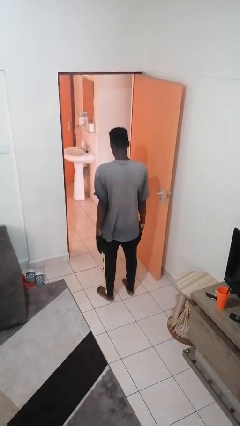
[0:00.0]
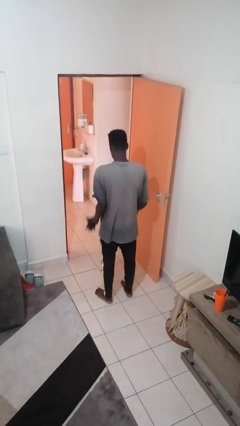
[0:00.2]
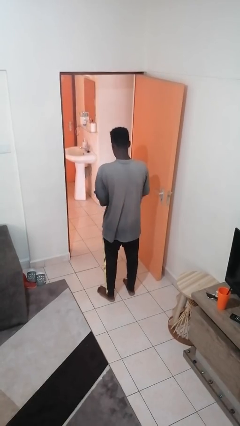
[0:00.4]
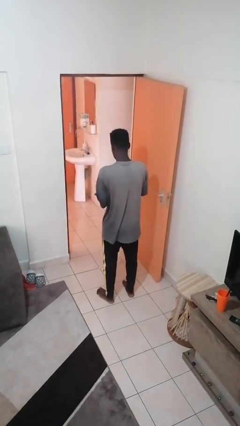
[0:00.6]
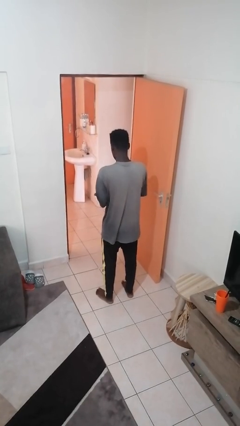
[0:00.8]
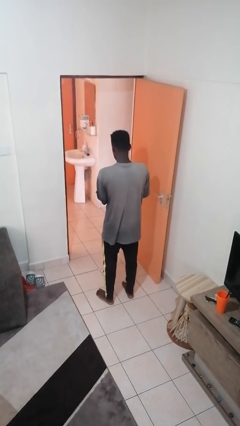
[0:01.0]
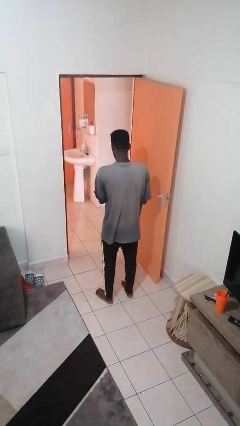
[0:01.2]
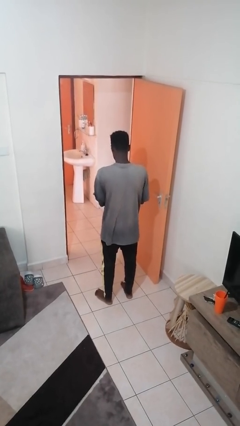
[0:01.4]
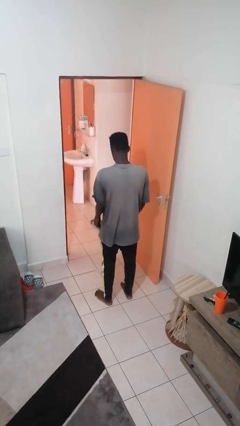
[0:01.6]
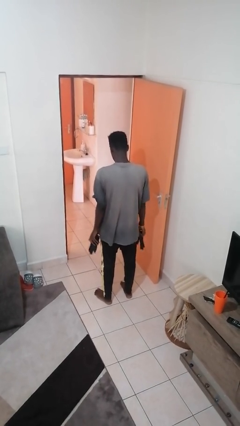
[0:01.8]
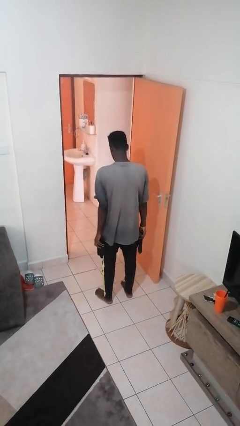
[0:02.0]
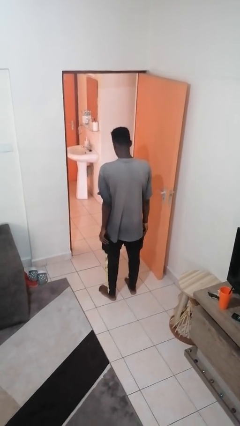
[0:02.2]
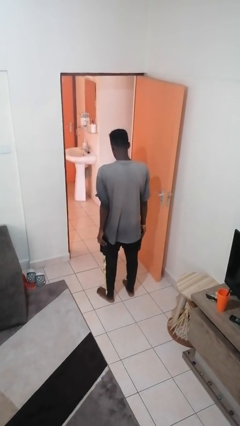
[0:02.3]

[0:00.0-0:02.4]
person takes off gloves

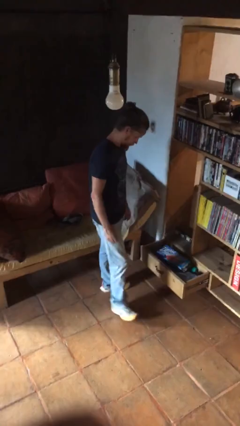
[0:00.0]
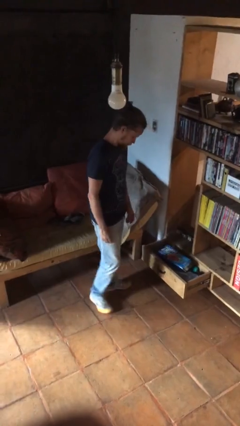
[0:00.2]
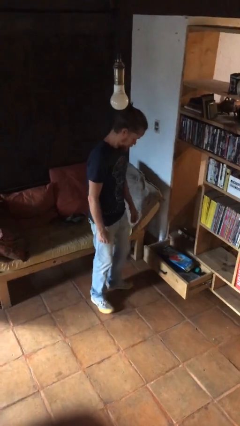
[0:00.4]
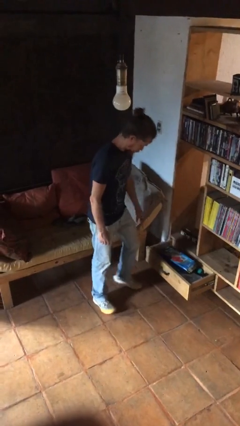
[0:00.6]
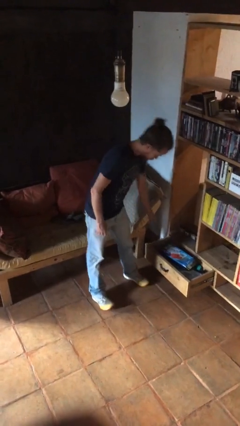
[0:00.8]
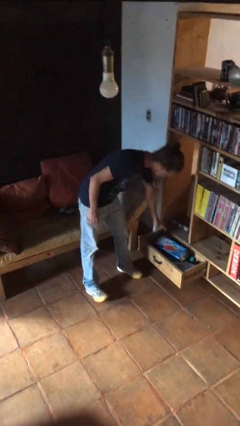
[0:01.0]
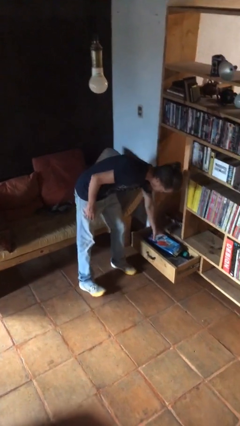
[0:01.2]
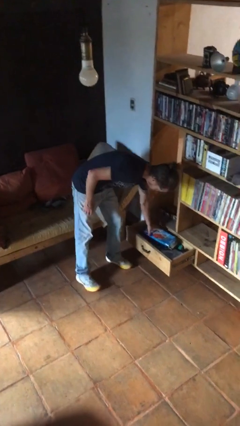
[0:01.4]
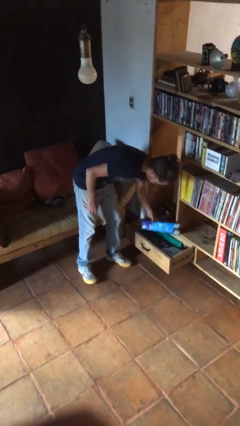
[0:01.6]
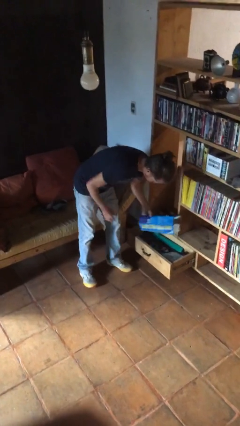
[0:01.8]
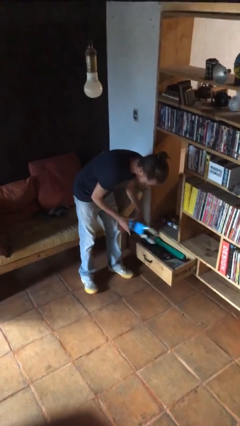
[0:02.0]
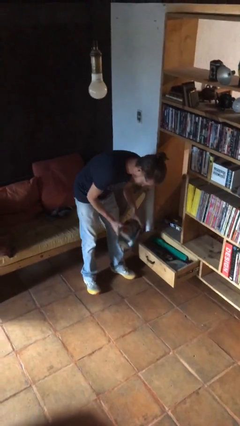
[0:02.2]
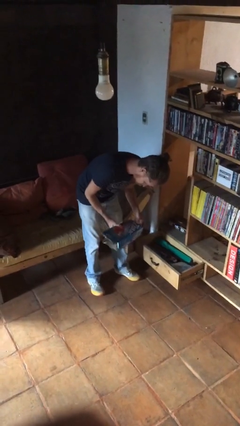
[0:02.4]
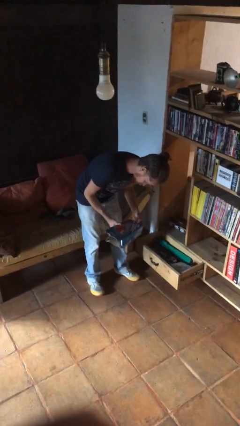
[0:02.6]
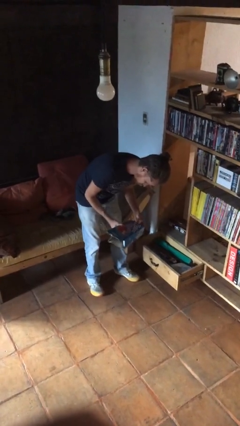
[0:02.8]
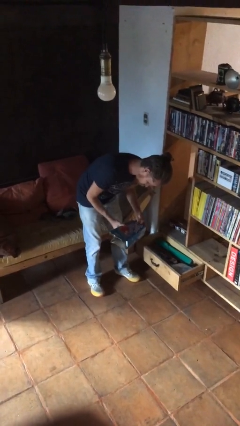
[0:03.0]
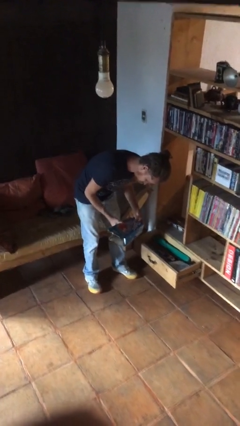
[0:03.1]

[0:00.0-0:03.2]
person picks up object from cabinet

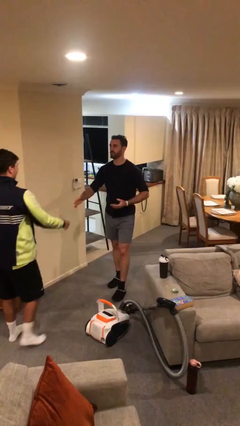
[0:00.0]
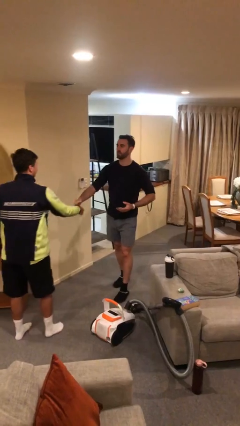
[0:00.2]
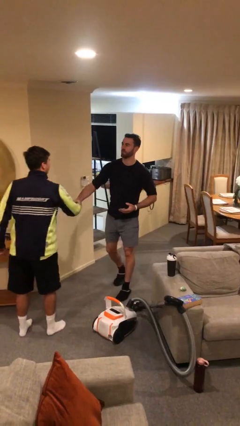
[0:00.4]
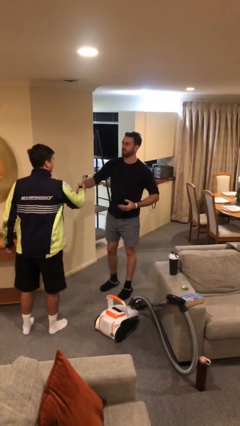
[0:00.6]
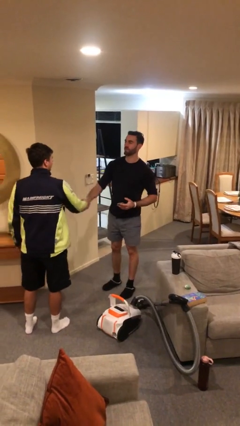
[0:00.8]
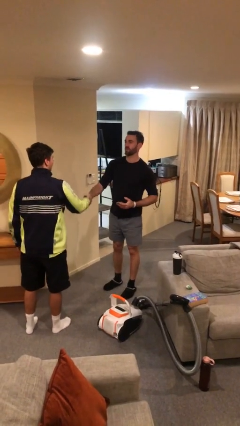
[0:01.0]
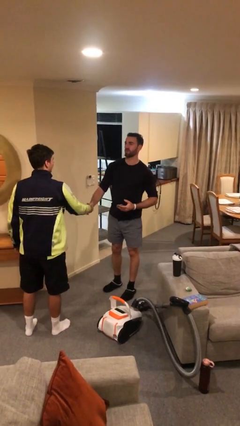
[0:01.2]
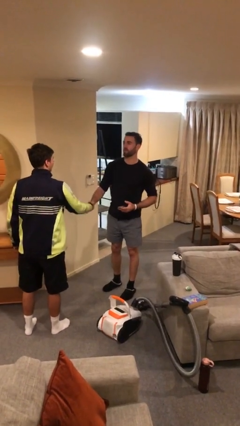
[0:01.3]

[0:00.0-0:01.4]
person shakes hand

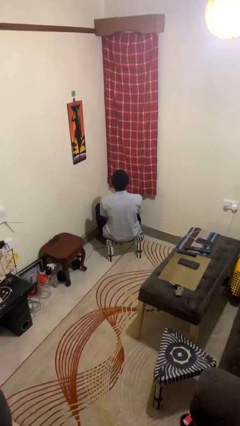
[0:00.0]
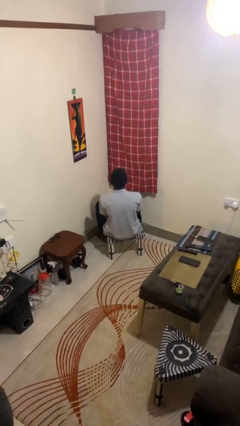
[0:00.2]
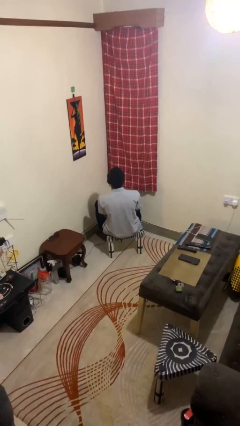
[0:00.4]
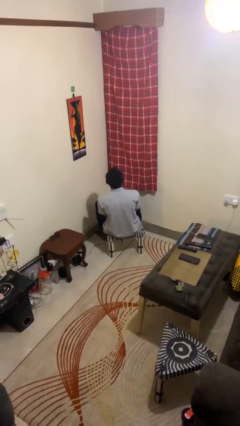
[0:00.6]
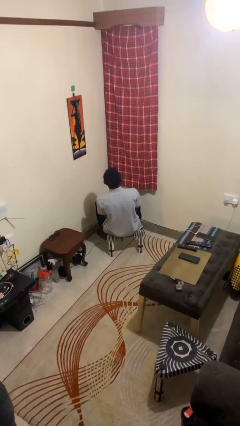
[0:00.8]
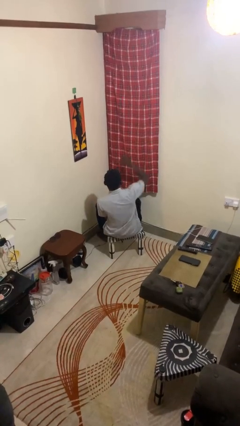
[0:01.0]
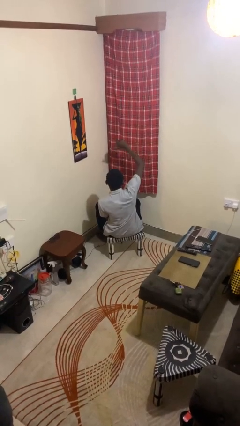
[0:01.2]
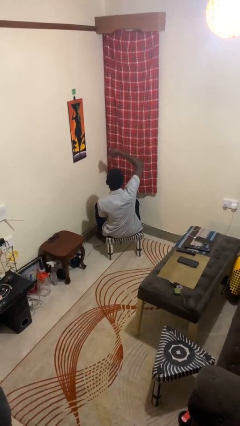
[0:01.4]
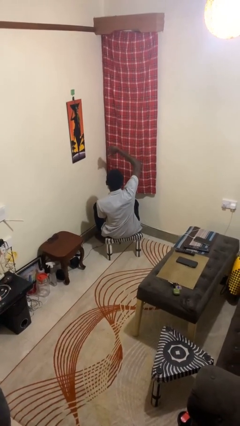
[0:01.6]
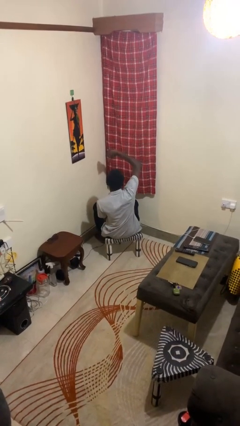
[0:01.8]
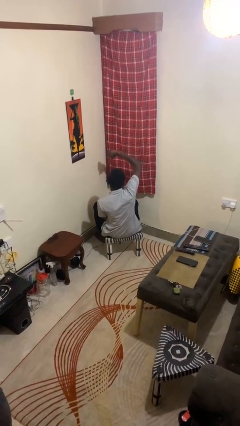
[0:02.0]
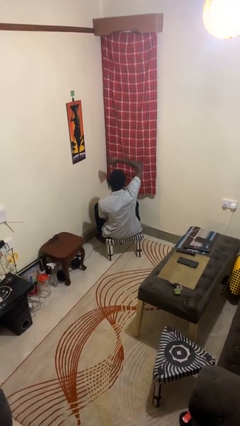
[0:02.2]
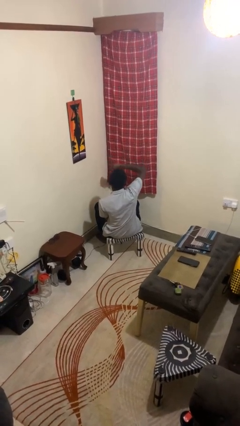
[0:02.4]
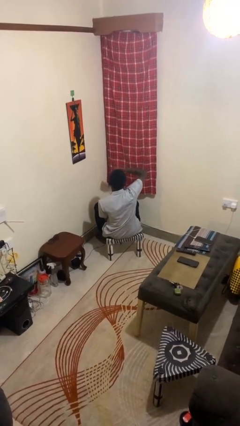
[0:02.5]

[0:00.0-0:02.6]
person gestures thumbs down

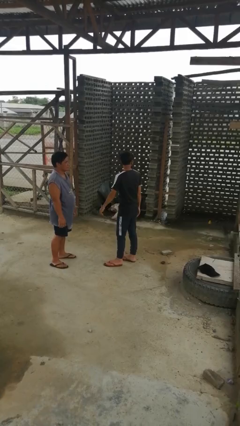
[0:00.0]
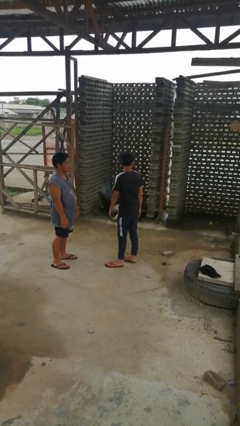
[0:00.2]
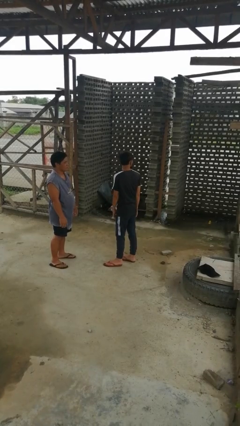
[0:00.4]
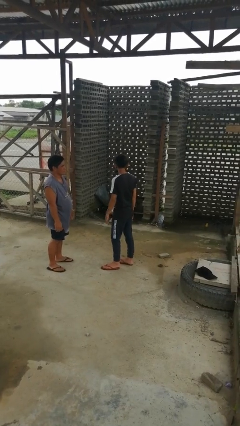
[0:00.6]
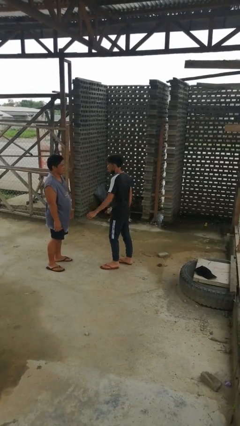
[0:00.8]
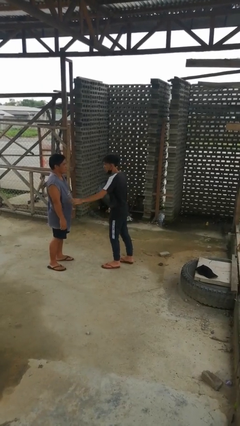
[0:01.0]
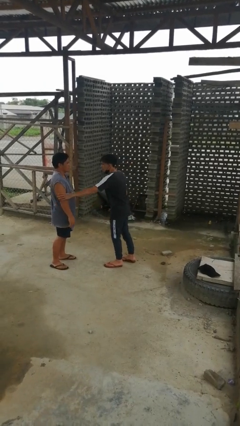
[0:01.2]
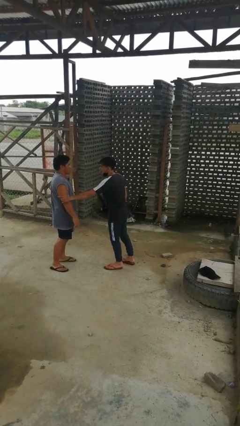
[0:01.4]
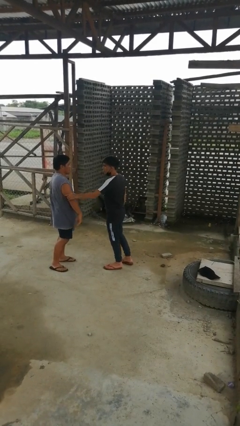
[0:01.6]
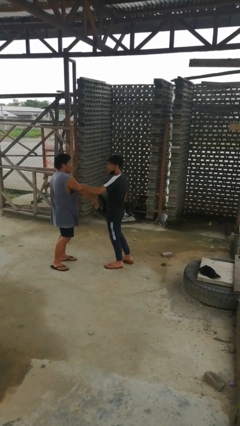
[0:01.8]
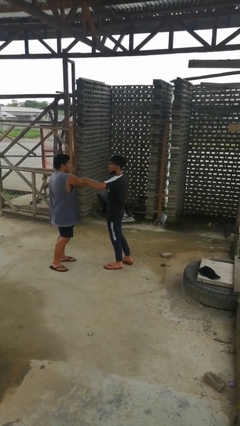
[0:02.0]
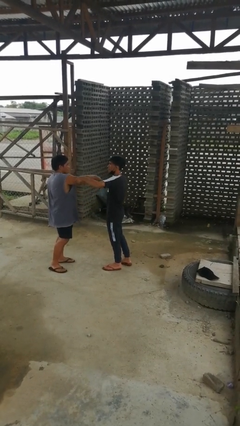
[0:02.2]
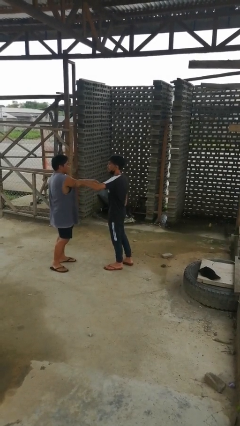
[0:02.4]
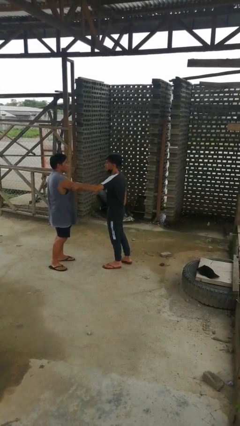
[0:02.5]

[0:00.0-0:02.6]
person grabs person by bicep

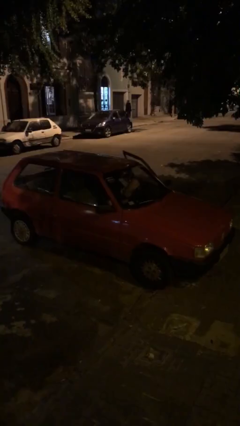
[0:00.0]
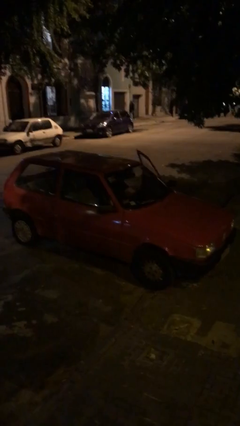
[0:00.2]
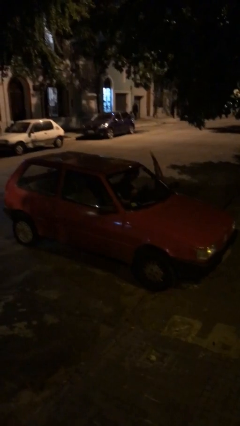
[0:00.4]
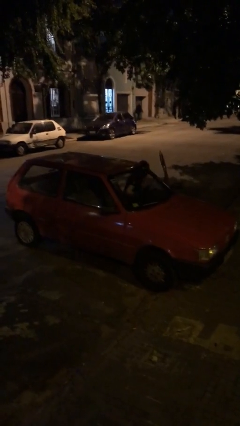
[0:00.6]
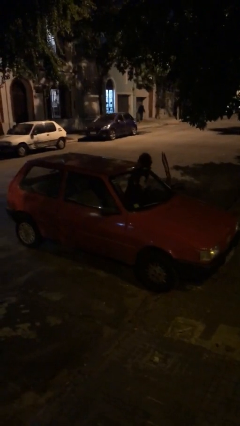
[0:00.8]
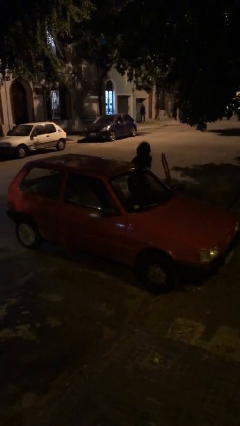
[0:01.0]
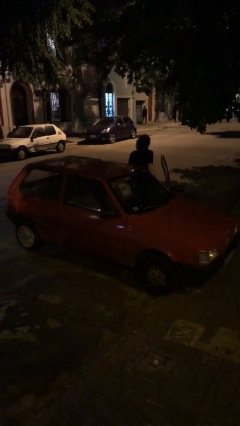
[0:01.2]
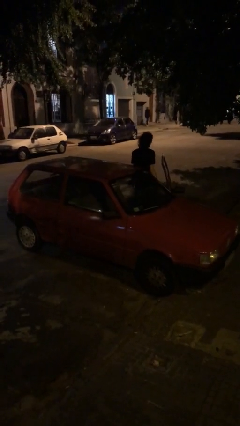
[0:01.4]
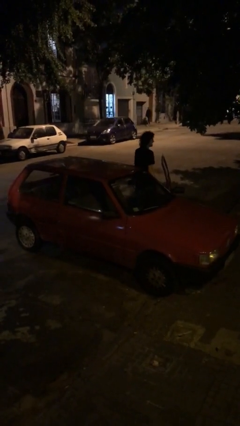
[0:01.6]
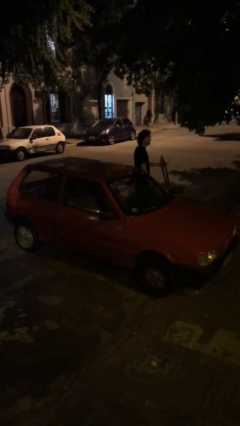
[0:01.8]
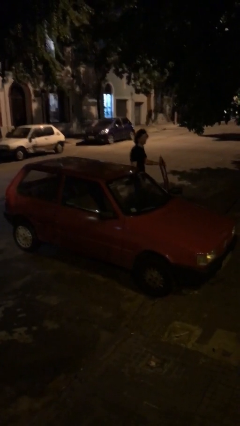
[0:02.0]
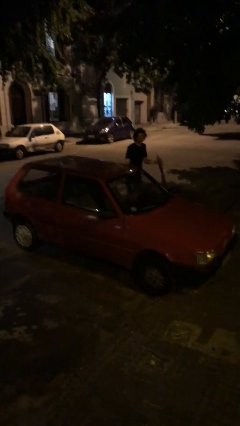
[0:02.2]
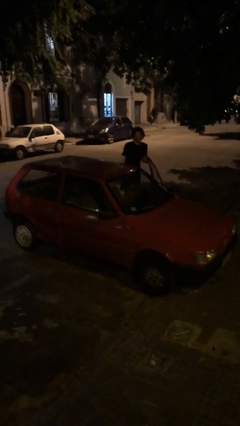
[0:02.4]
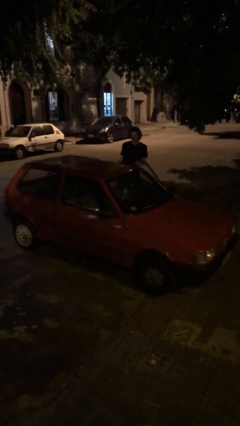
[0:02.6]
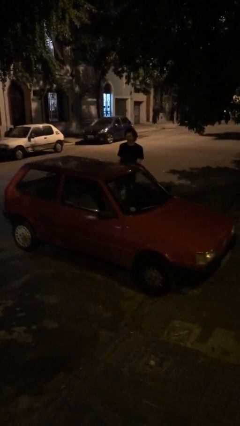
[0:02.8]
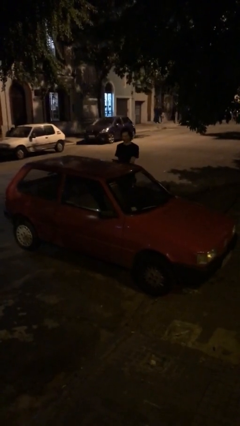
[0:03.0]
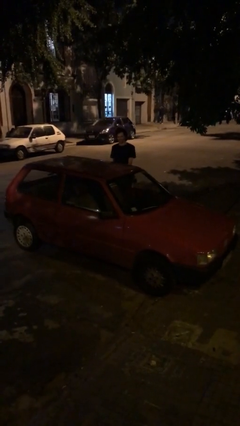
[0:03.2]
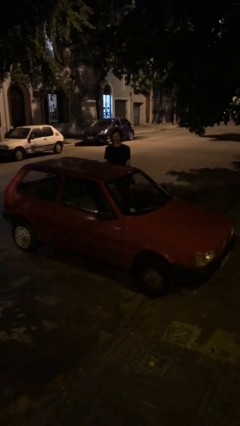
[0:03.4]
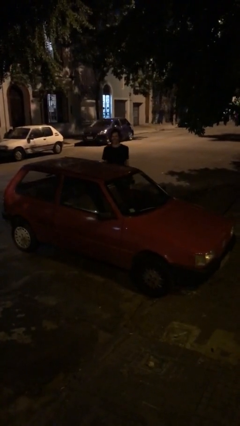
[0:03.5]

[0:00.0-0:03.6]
car drops off person

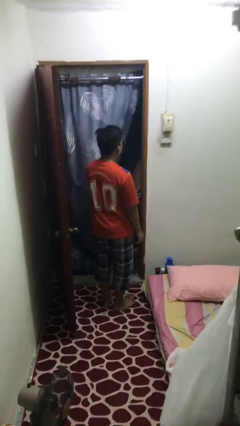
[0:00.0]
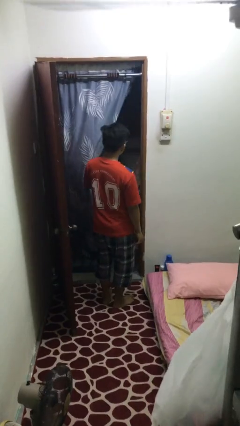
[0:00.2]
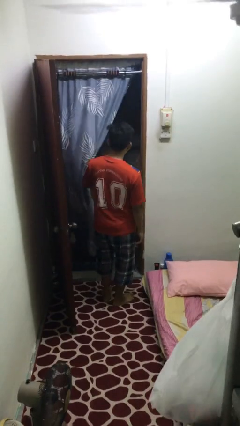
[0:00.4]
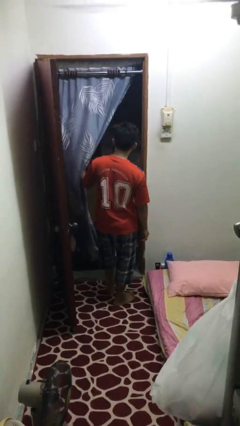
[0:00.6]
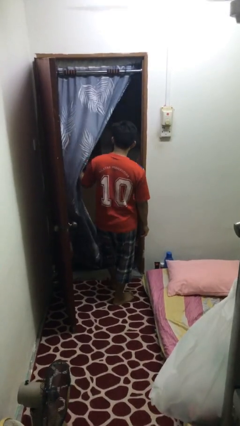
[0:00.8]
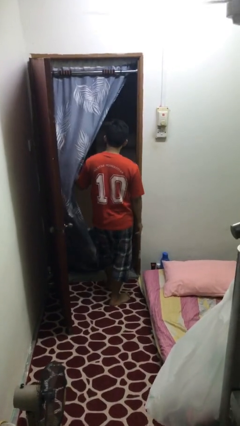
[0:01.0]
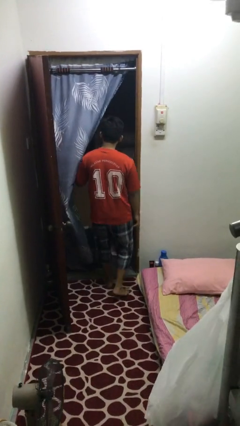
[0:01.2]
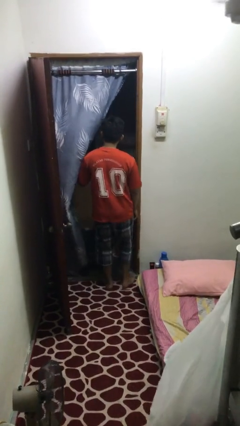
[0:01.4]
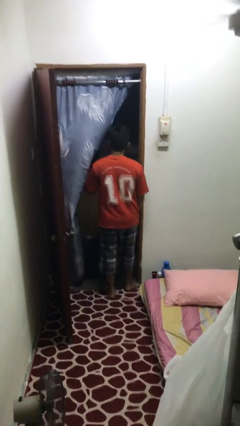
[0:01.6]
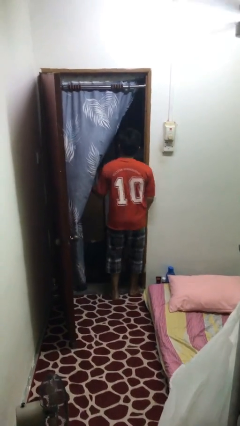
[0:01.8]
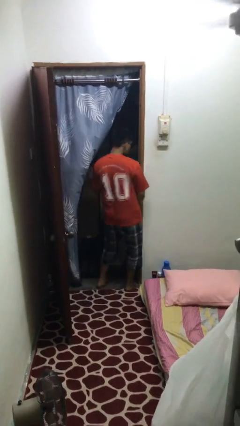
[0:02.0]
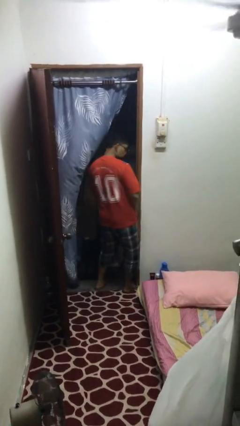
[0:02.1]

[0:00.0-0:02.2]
person bumps into wall
